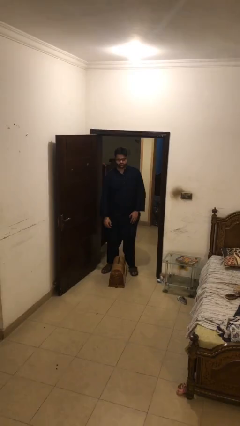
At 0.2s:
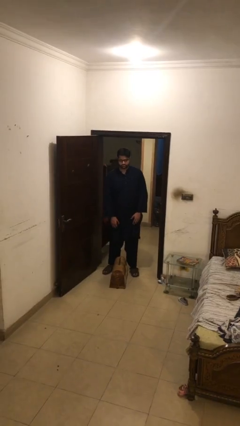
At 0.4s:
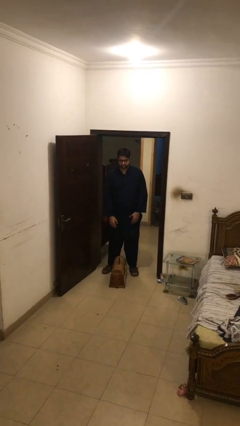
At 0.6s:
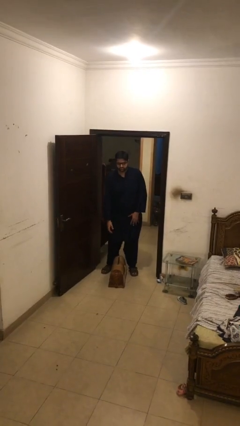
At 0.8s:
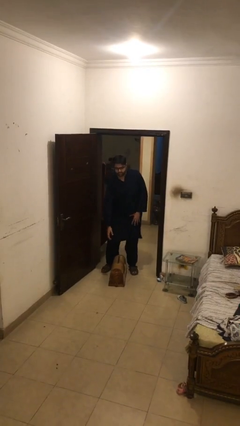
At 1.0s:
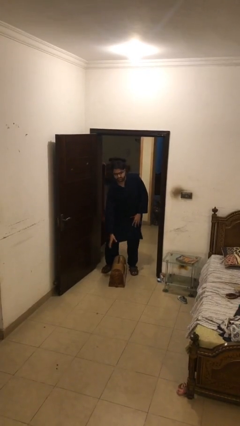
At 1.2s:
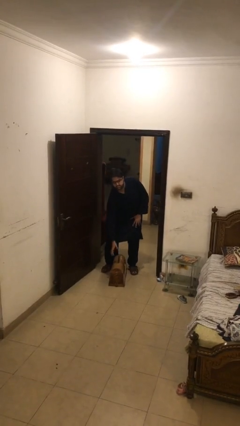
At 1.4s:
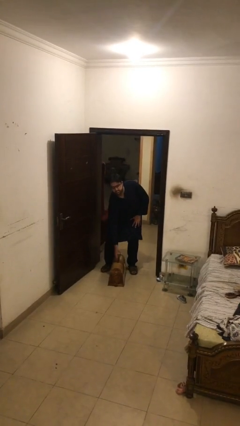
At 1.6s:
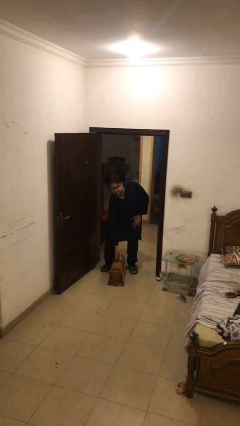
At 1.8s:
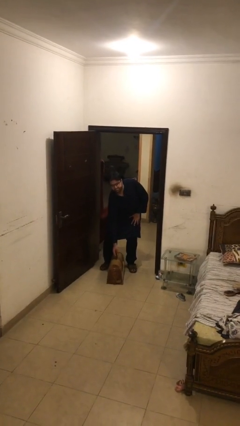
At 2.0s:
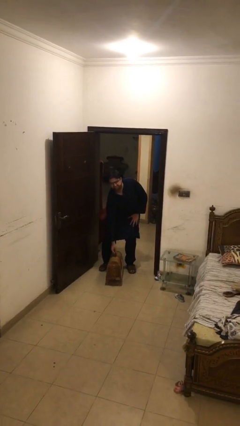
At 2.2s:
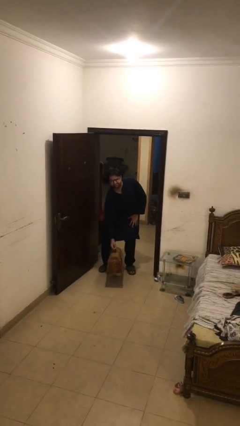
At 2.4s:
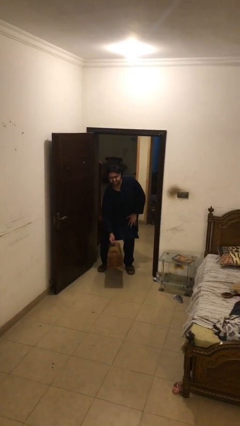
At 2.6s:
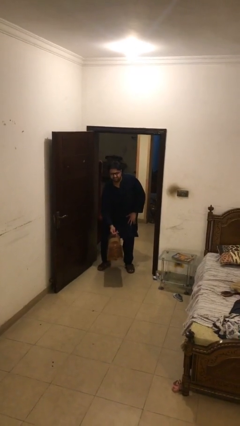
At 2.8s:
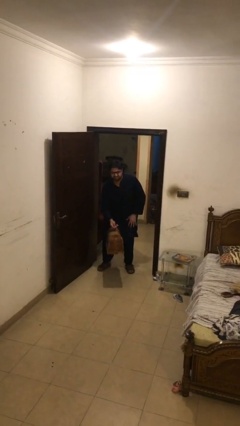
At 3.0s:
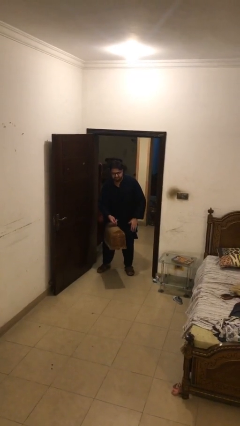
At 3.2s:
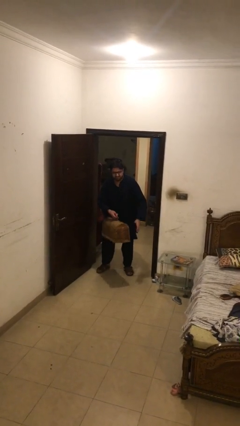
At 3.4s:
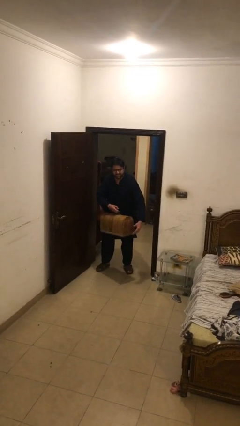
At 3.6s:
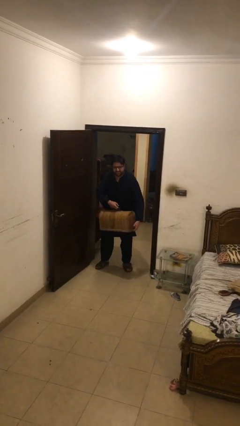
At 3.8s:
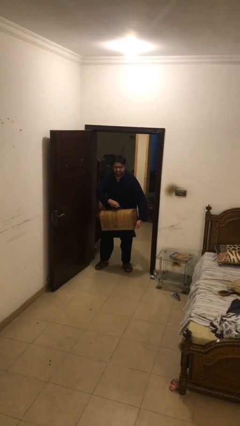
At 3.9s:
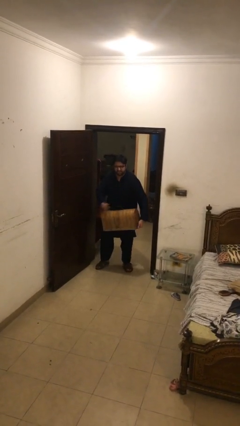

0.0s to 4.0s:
person picks up object from floor

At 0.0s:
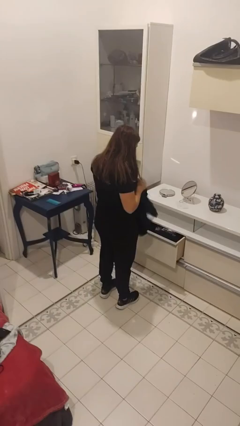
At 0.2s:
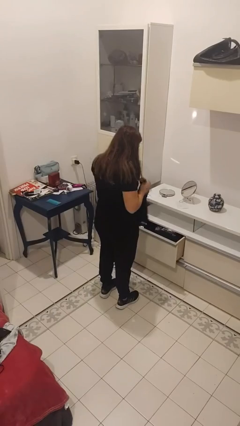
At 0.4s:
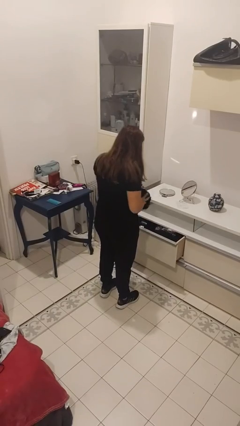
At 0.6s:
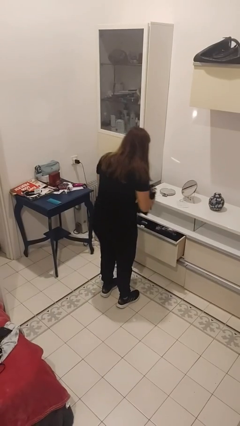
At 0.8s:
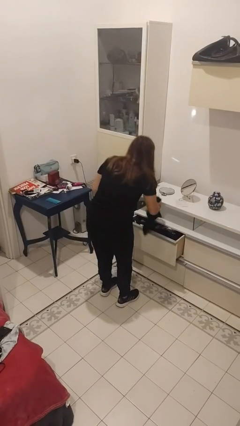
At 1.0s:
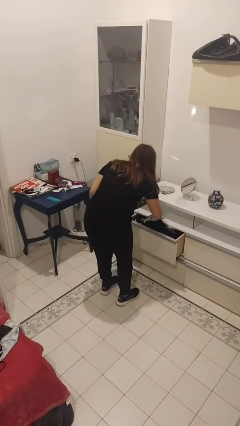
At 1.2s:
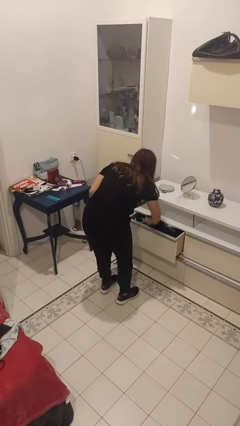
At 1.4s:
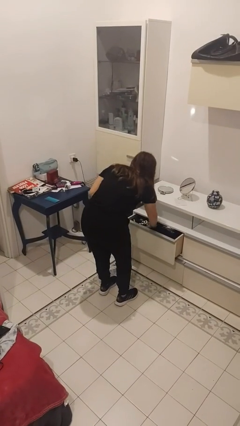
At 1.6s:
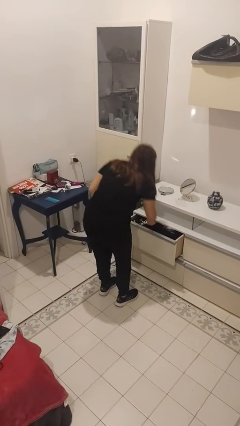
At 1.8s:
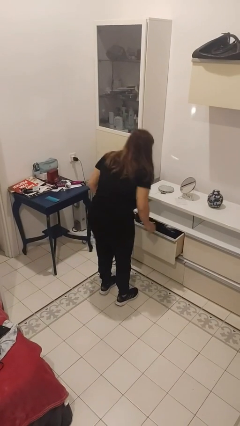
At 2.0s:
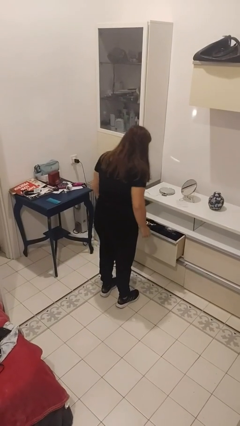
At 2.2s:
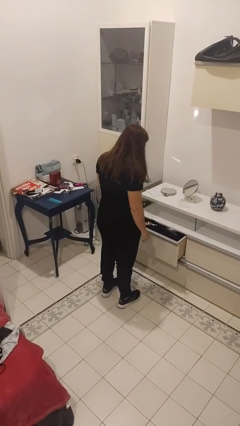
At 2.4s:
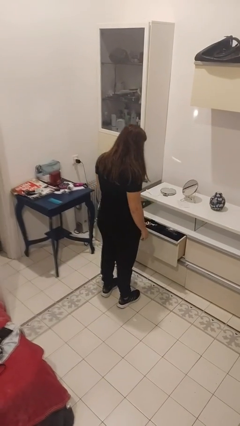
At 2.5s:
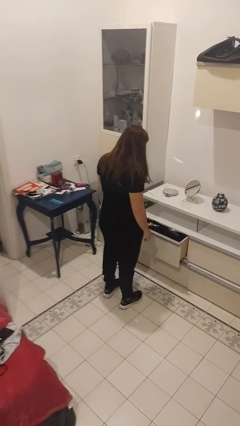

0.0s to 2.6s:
person puts clothes into dresser

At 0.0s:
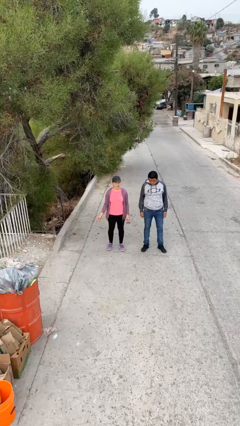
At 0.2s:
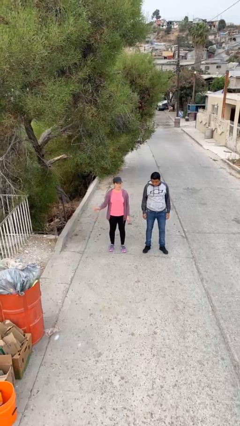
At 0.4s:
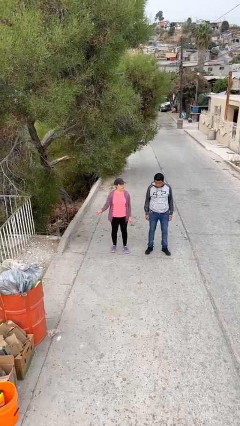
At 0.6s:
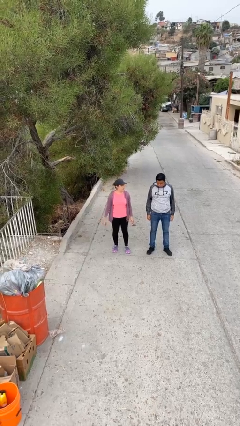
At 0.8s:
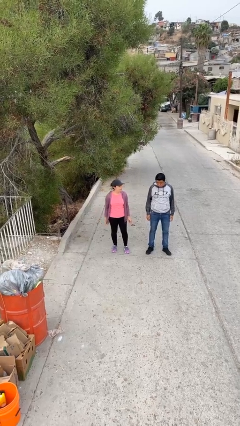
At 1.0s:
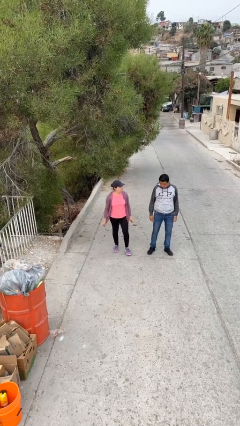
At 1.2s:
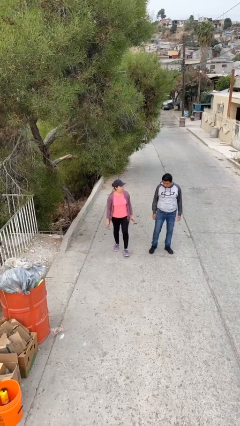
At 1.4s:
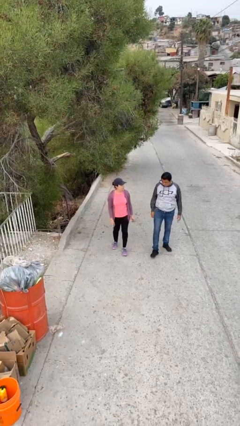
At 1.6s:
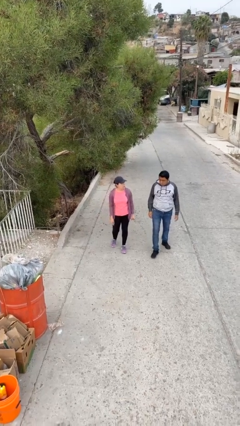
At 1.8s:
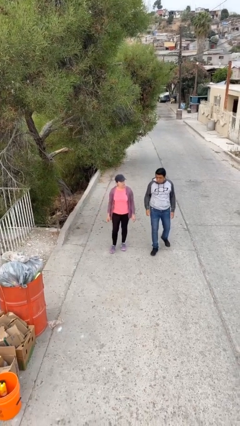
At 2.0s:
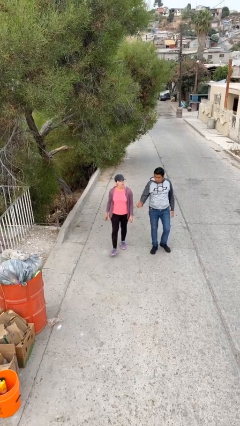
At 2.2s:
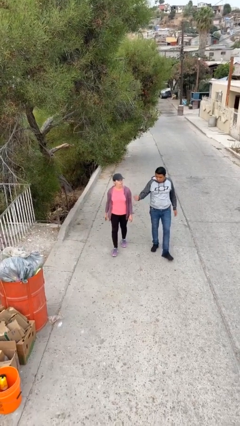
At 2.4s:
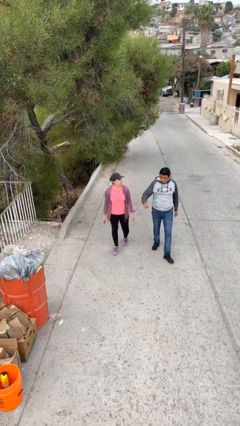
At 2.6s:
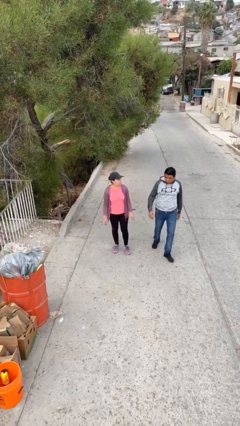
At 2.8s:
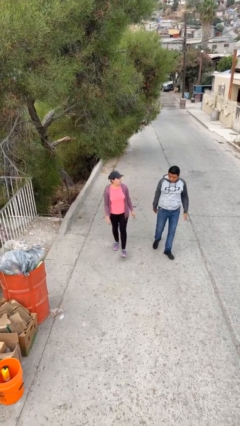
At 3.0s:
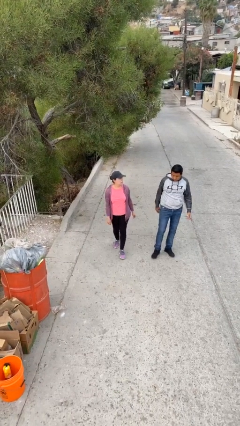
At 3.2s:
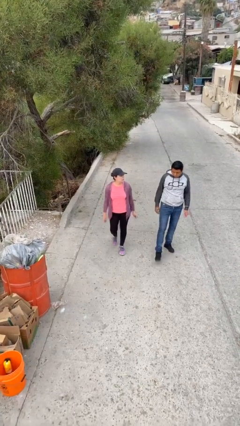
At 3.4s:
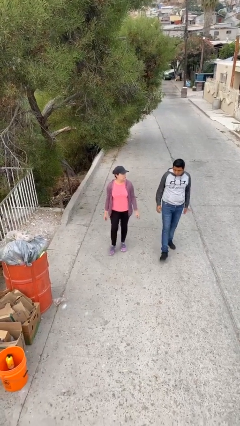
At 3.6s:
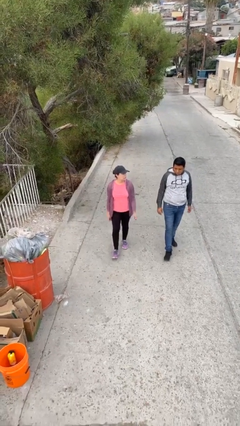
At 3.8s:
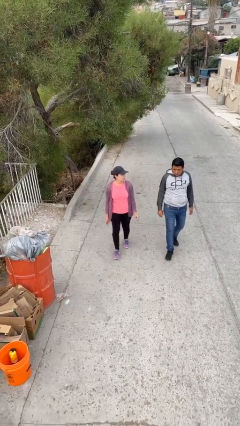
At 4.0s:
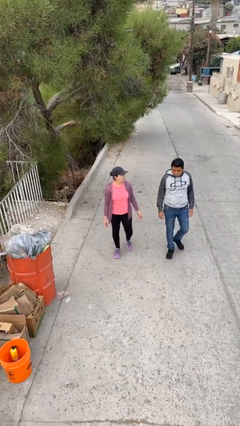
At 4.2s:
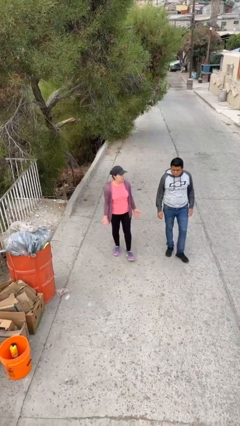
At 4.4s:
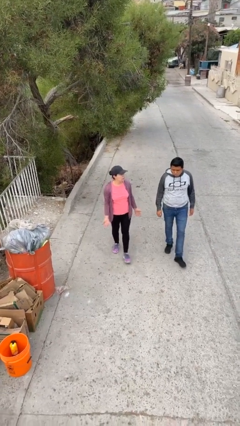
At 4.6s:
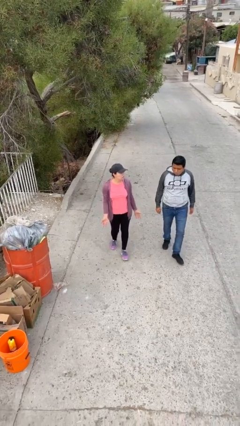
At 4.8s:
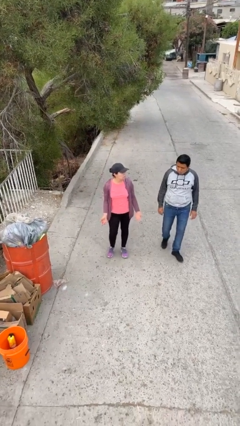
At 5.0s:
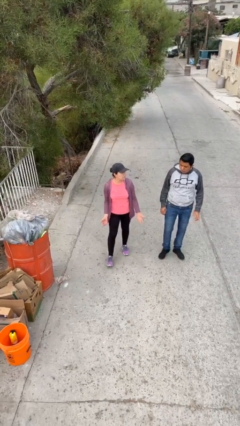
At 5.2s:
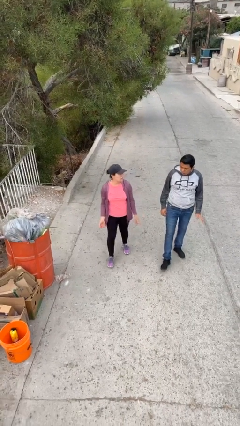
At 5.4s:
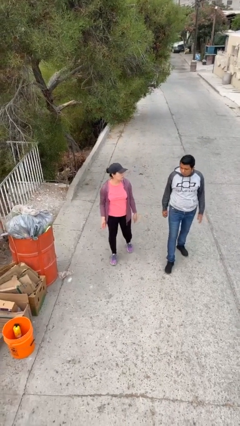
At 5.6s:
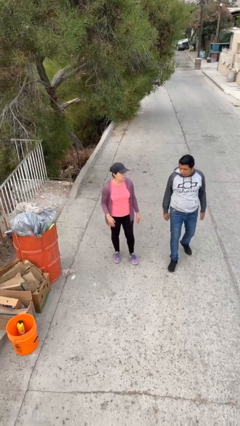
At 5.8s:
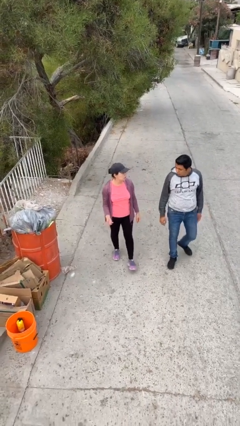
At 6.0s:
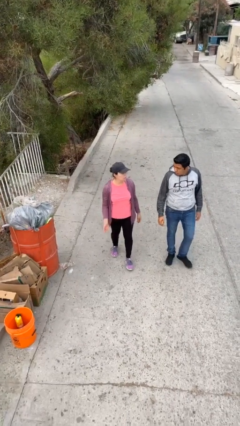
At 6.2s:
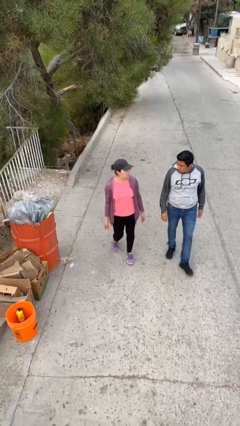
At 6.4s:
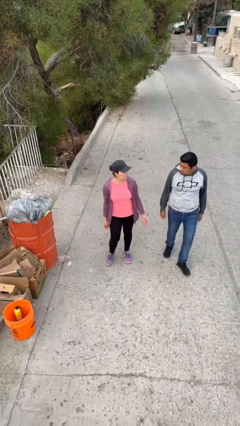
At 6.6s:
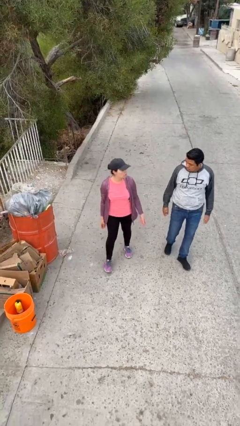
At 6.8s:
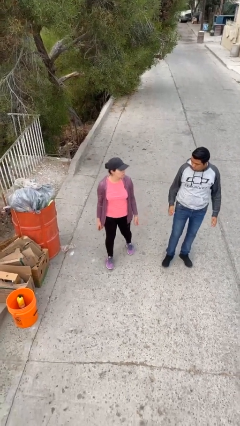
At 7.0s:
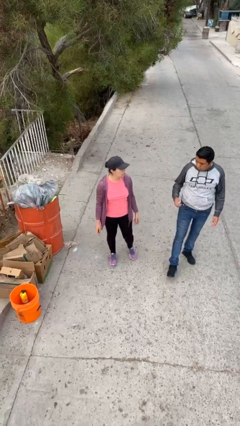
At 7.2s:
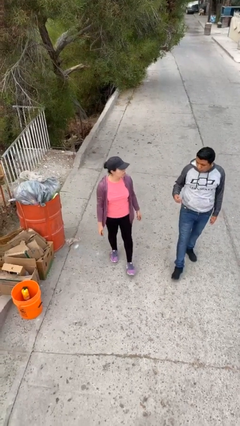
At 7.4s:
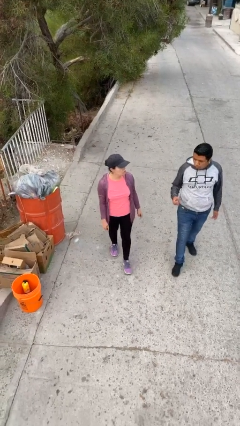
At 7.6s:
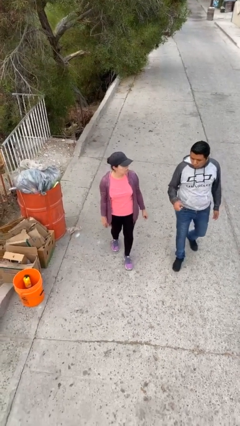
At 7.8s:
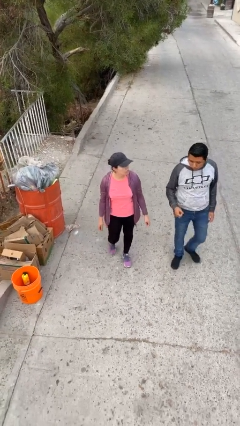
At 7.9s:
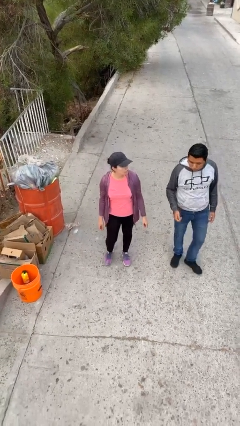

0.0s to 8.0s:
person talks to person

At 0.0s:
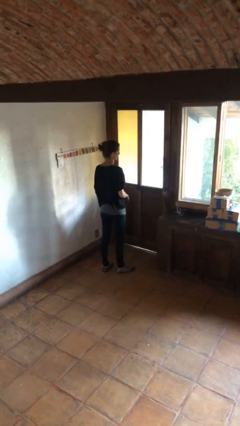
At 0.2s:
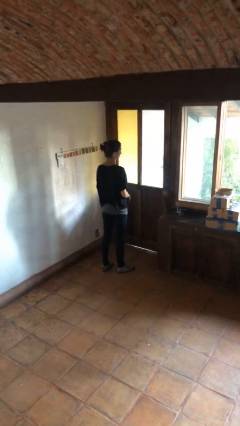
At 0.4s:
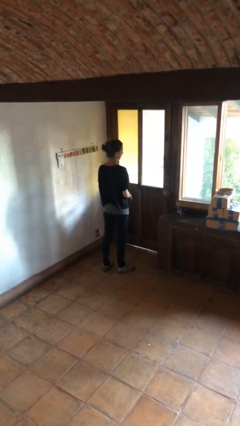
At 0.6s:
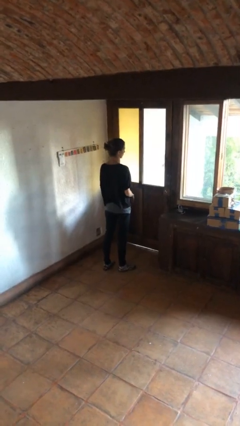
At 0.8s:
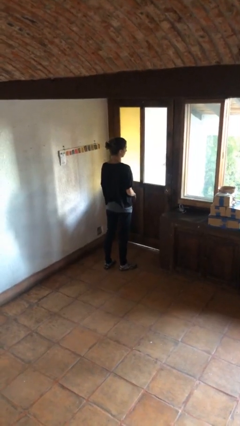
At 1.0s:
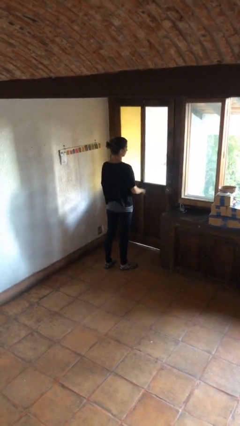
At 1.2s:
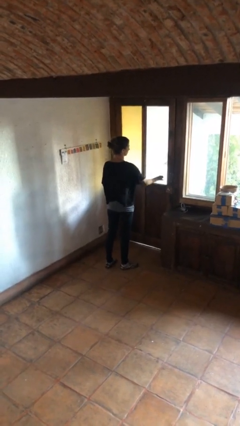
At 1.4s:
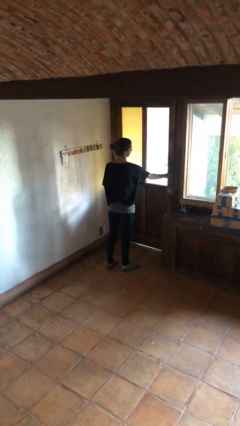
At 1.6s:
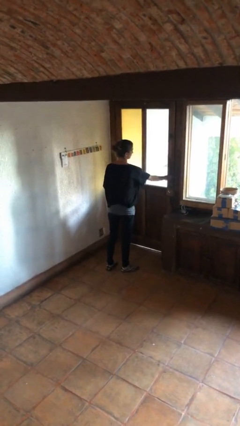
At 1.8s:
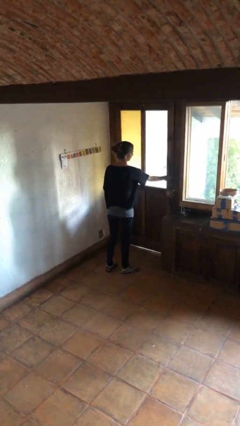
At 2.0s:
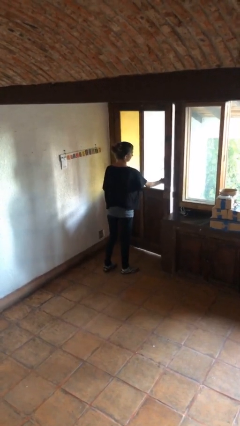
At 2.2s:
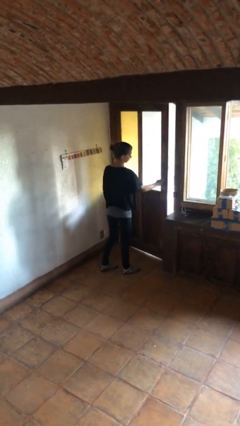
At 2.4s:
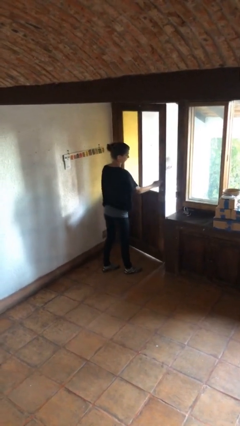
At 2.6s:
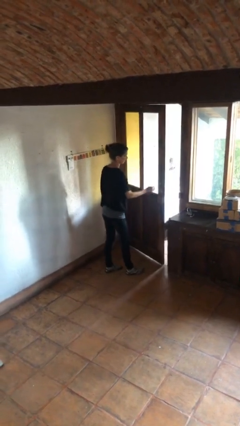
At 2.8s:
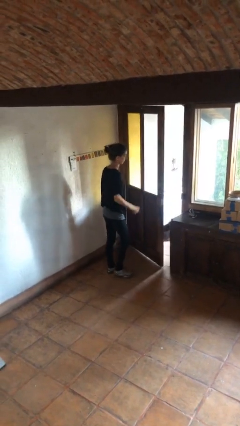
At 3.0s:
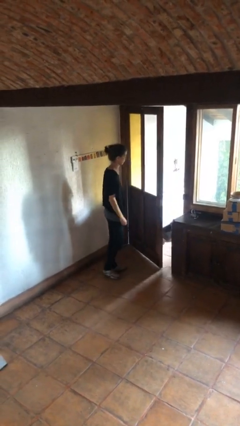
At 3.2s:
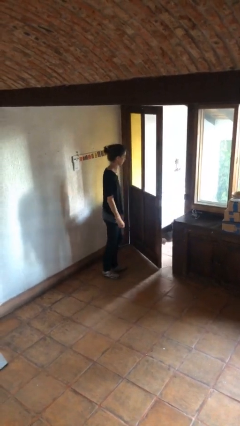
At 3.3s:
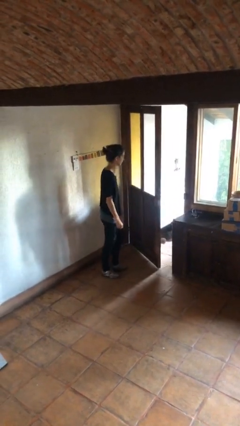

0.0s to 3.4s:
person opens facility door

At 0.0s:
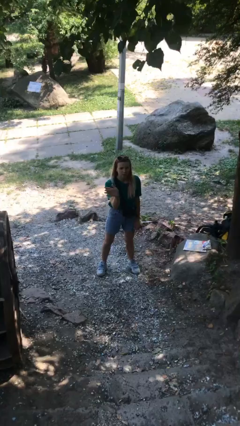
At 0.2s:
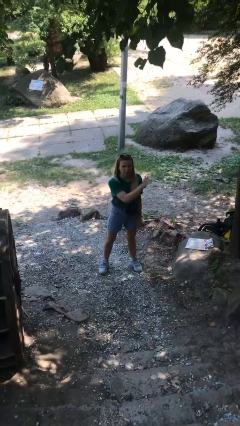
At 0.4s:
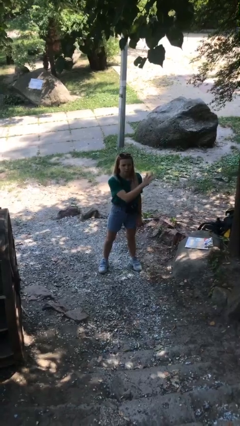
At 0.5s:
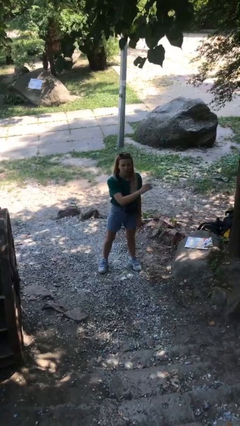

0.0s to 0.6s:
person gestures swipe left
